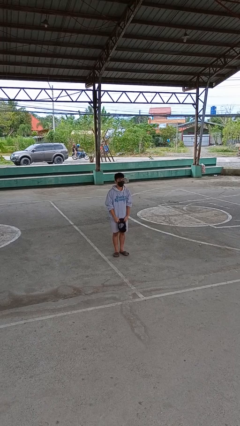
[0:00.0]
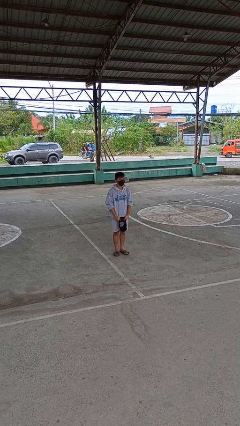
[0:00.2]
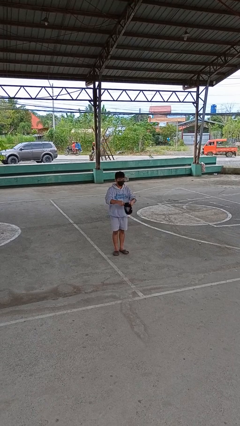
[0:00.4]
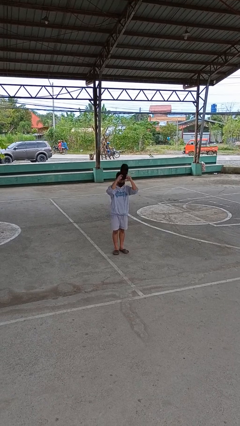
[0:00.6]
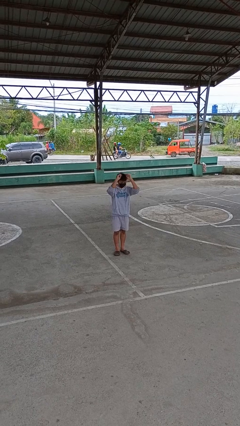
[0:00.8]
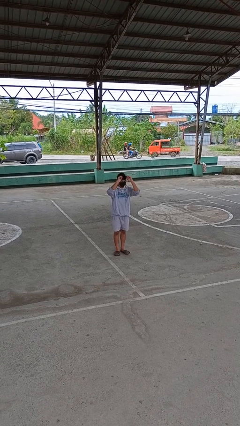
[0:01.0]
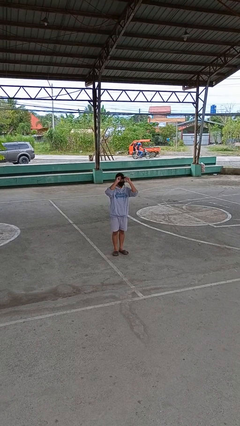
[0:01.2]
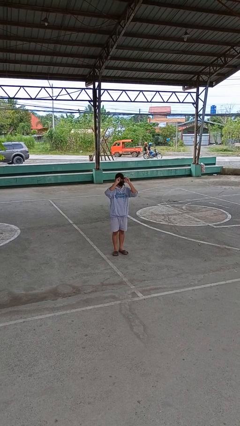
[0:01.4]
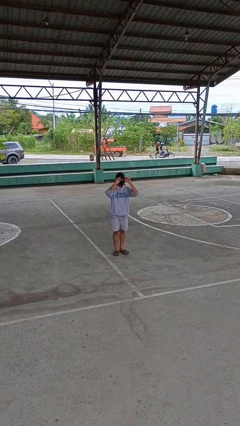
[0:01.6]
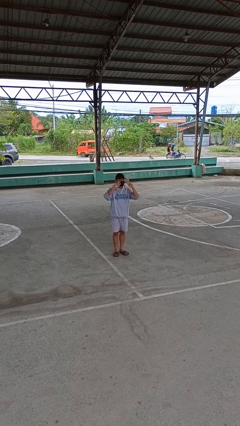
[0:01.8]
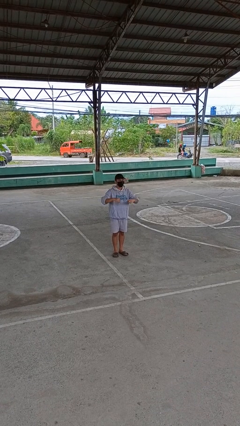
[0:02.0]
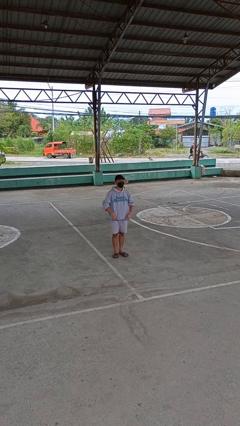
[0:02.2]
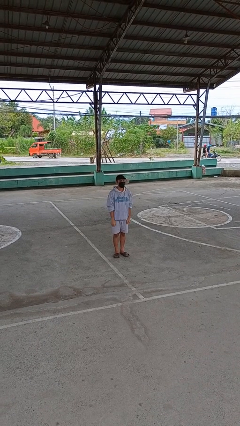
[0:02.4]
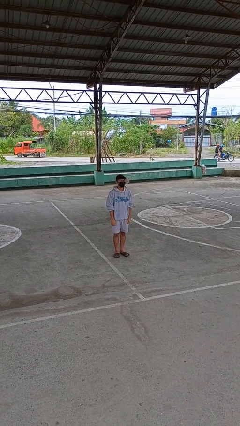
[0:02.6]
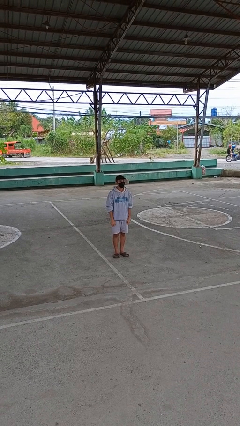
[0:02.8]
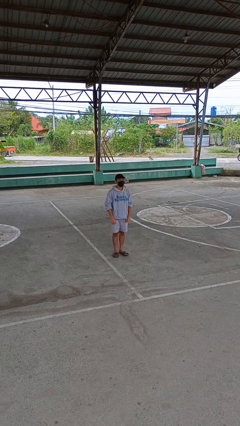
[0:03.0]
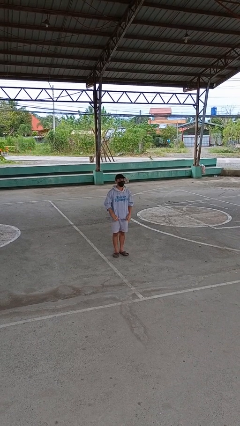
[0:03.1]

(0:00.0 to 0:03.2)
person puts on hat

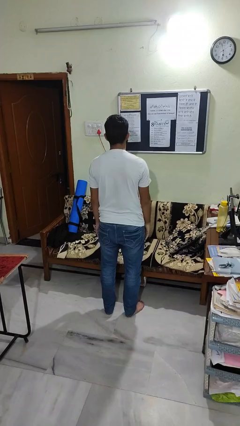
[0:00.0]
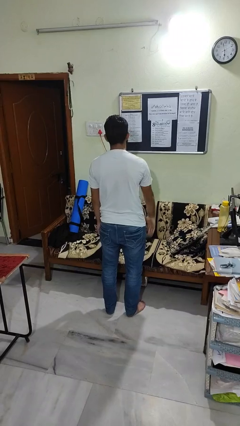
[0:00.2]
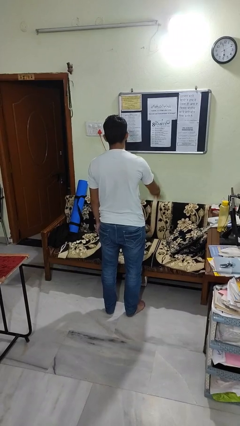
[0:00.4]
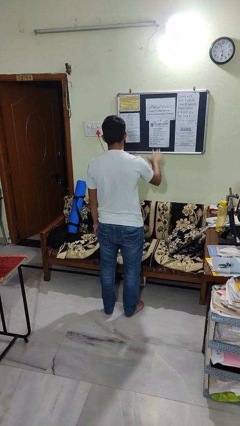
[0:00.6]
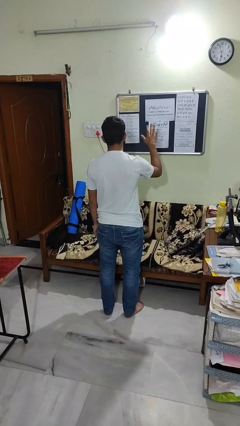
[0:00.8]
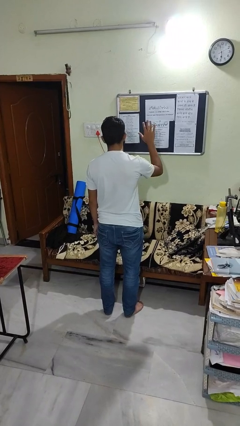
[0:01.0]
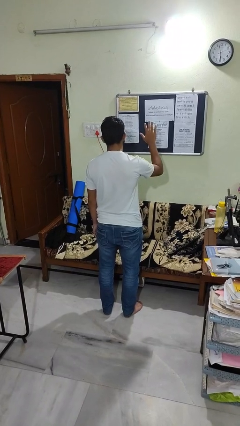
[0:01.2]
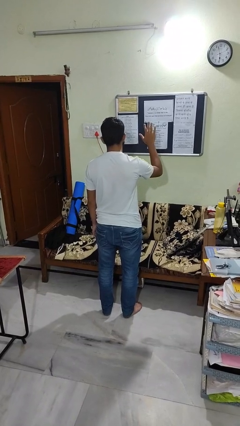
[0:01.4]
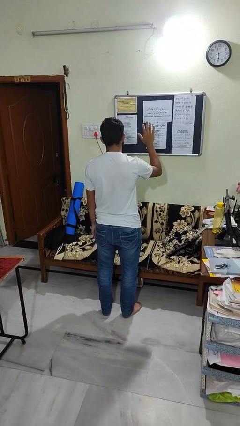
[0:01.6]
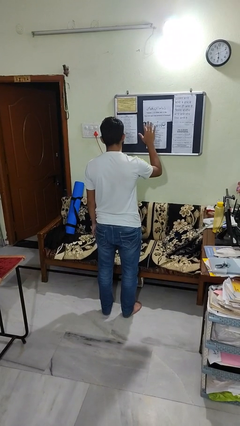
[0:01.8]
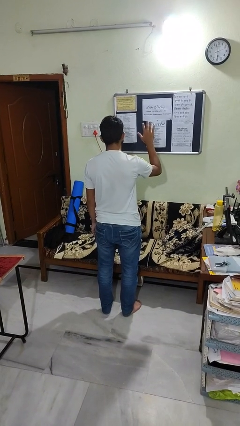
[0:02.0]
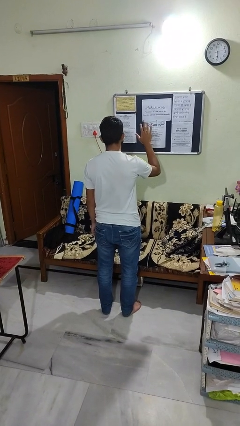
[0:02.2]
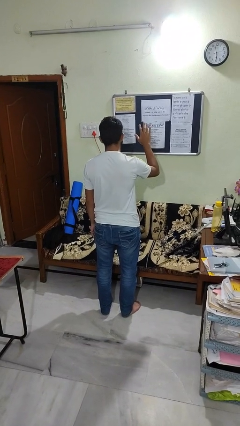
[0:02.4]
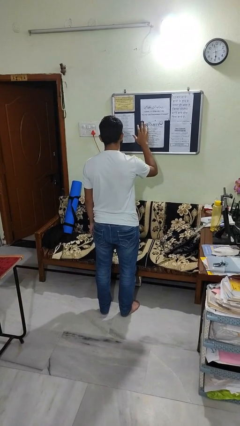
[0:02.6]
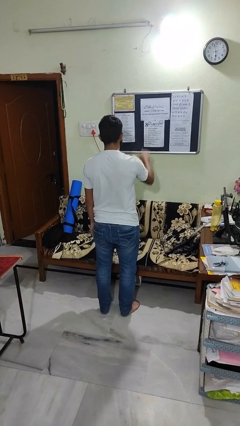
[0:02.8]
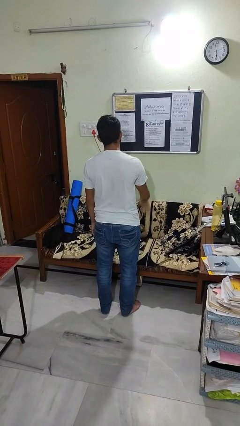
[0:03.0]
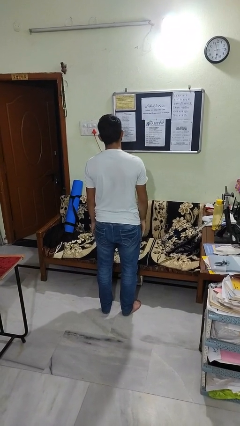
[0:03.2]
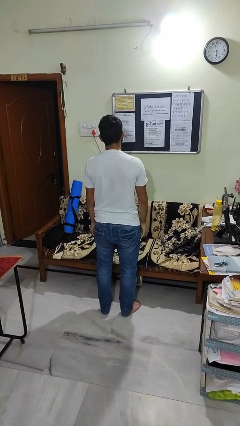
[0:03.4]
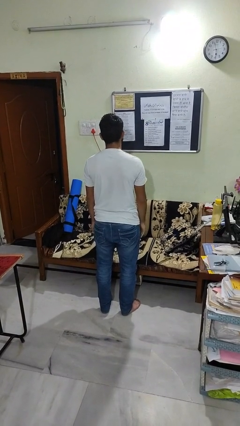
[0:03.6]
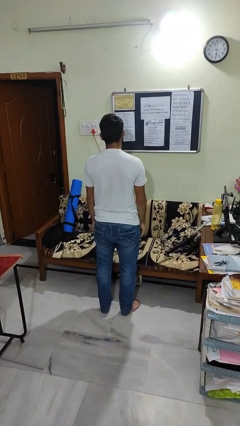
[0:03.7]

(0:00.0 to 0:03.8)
person gestures number five

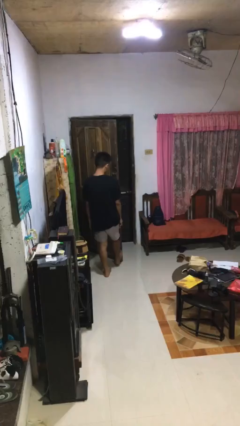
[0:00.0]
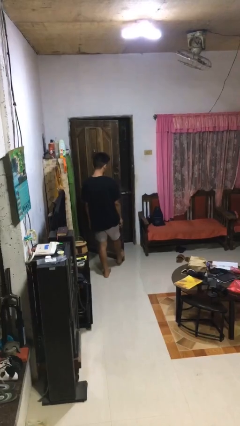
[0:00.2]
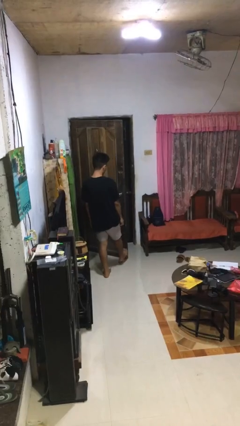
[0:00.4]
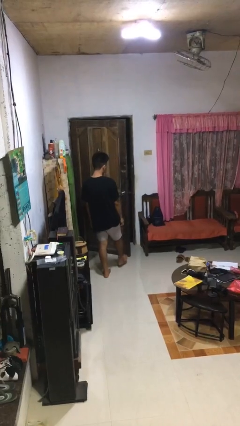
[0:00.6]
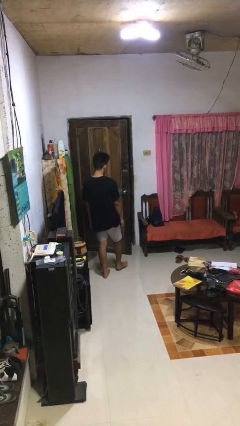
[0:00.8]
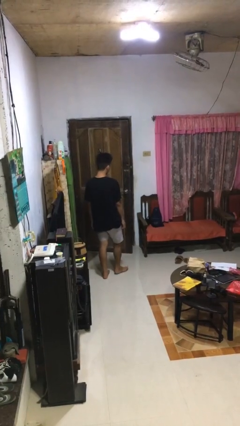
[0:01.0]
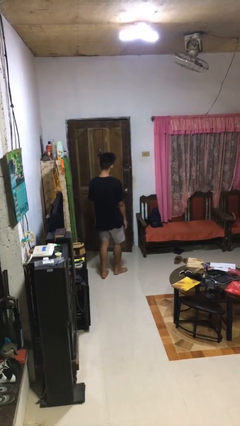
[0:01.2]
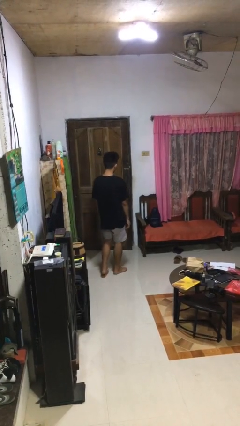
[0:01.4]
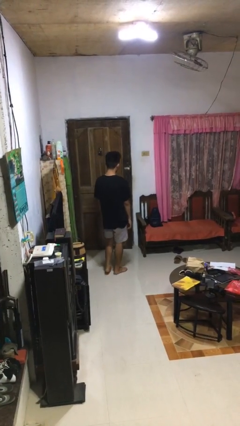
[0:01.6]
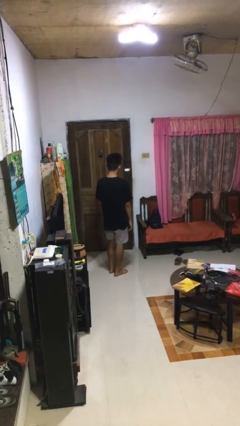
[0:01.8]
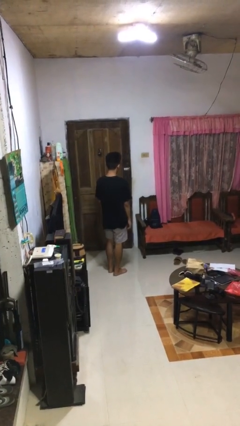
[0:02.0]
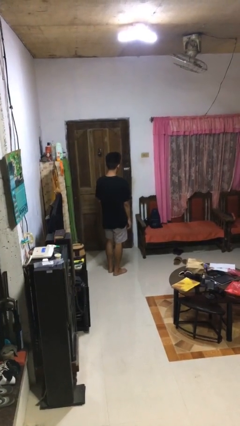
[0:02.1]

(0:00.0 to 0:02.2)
person closes door with foot

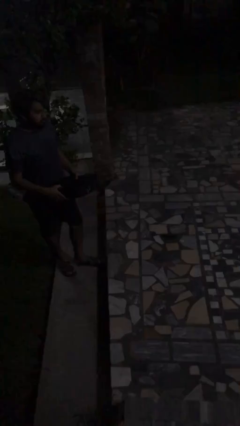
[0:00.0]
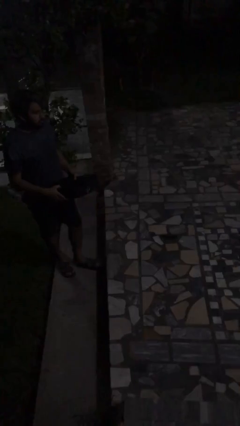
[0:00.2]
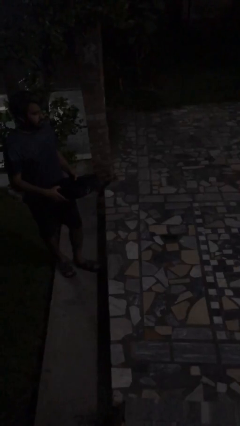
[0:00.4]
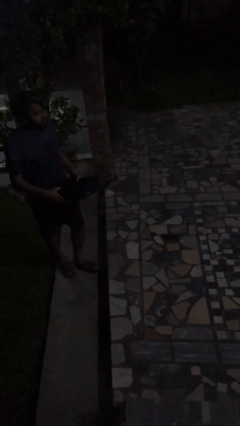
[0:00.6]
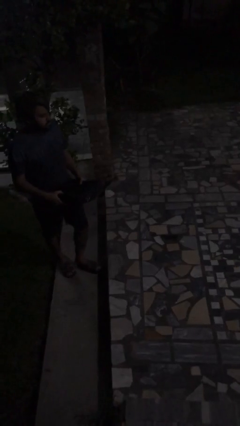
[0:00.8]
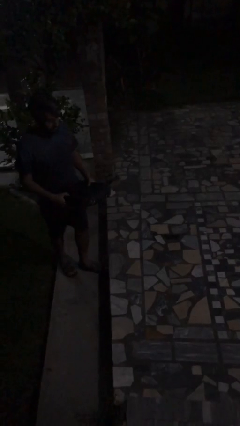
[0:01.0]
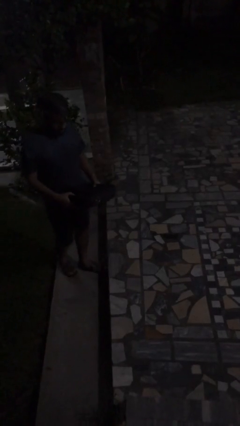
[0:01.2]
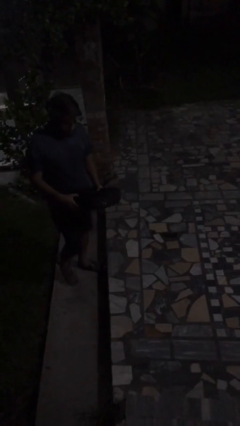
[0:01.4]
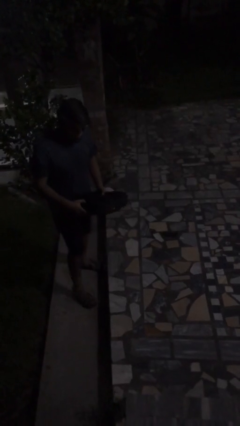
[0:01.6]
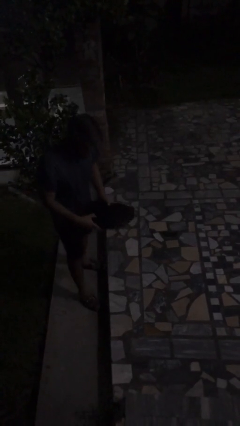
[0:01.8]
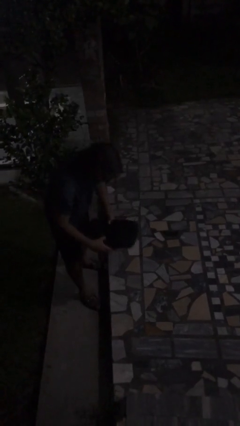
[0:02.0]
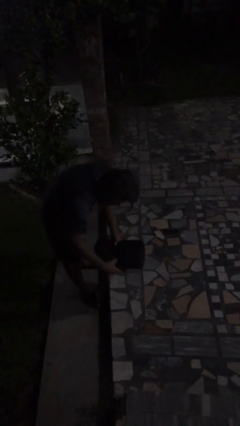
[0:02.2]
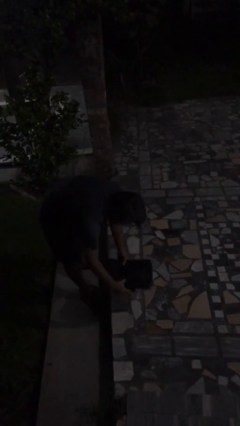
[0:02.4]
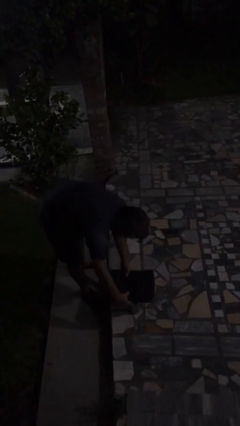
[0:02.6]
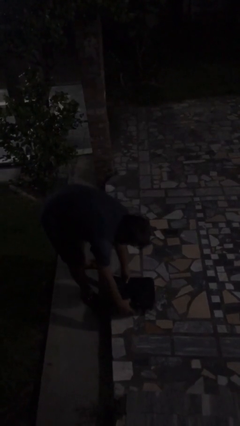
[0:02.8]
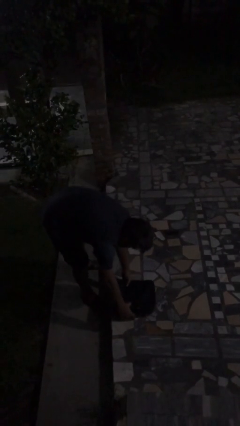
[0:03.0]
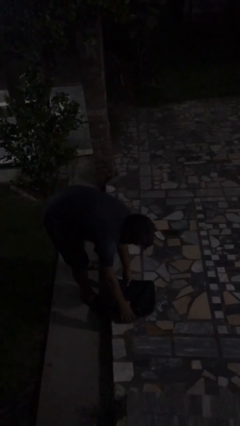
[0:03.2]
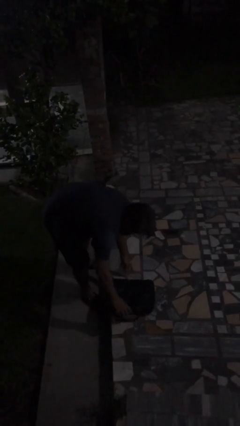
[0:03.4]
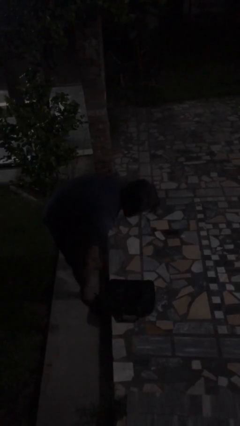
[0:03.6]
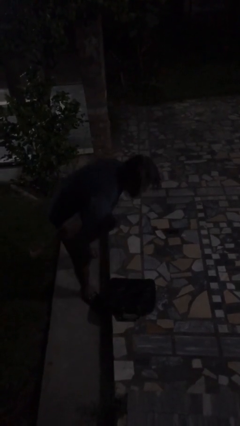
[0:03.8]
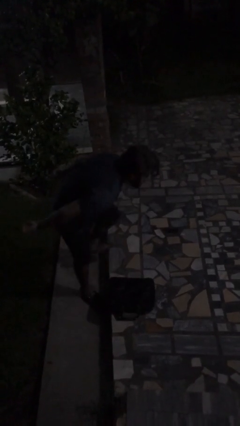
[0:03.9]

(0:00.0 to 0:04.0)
person puts down object on floor

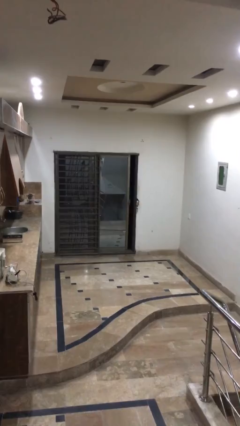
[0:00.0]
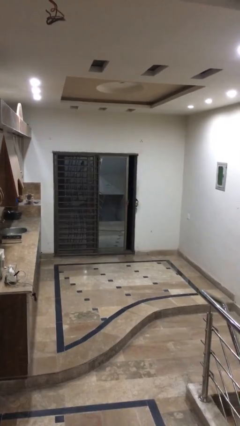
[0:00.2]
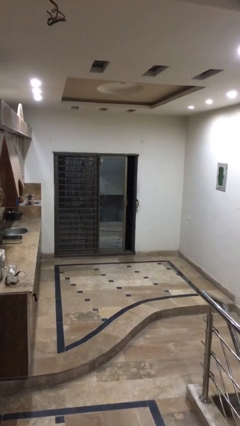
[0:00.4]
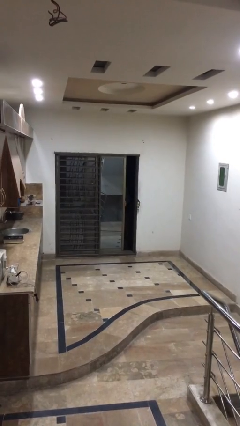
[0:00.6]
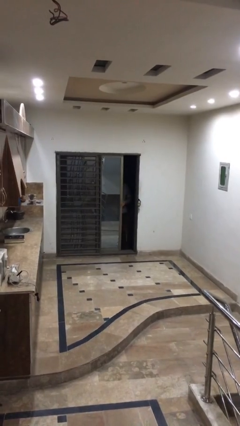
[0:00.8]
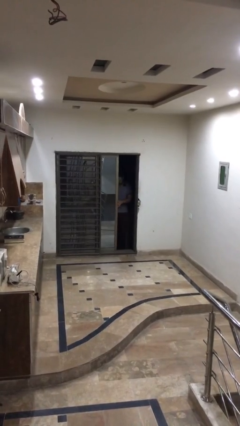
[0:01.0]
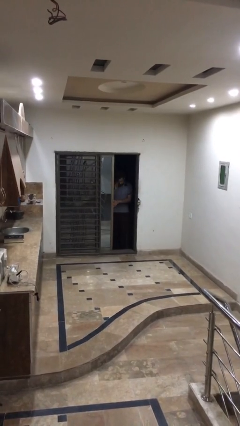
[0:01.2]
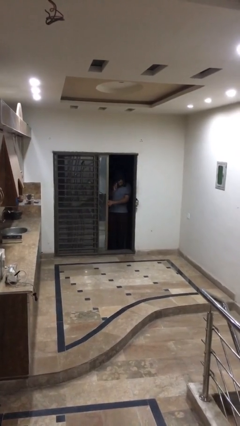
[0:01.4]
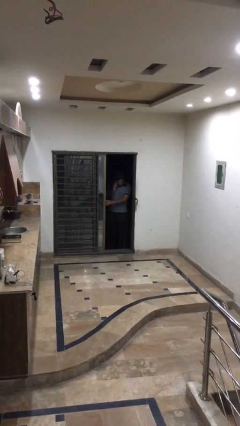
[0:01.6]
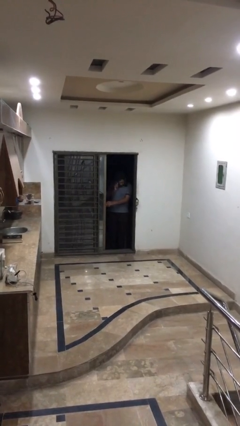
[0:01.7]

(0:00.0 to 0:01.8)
person opens facility door

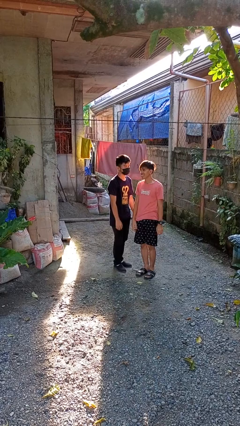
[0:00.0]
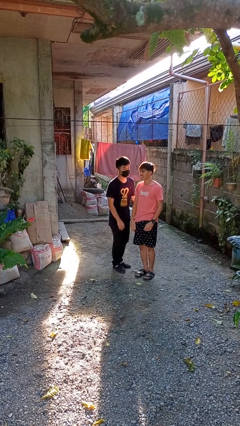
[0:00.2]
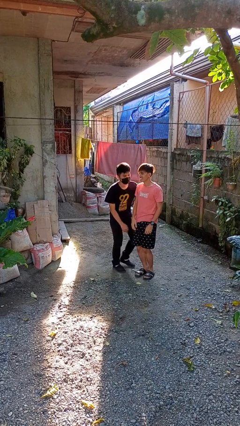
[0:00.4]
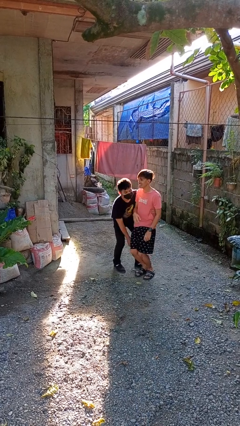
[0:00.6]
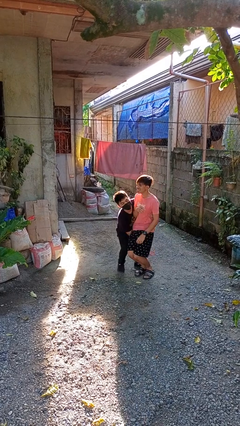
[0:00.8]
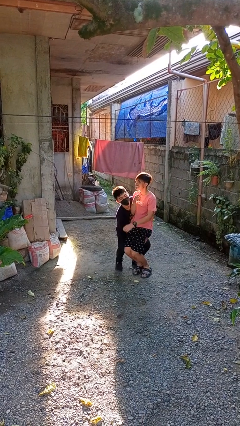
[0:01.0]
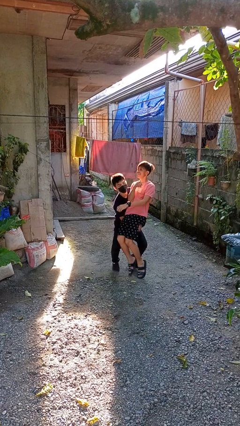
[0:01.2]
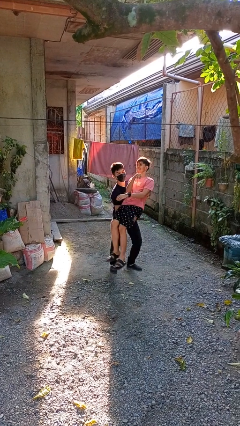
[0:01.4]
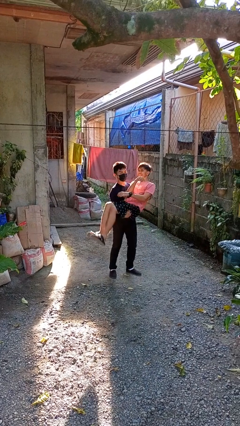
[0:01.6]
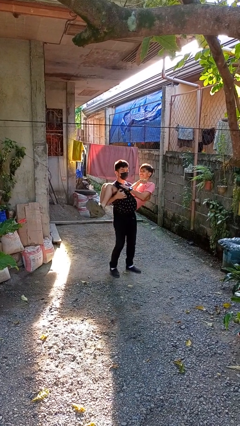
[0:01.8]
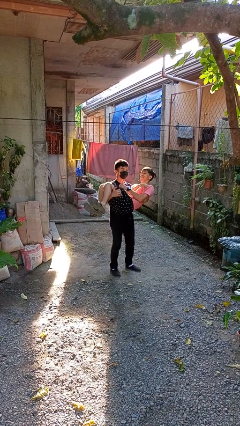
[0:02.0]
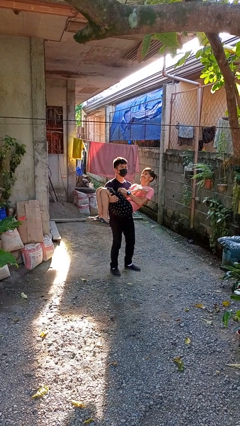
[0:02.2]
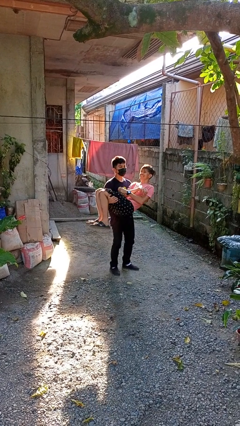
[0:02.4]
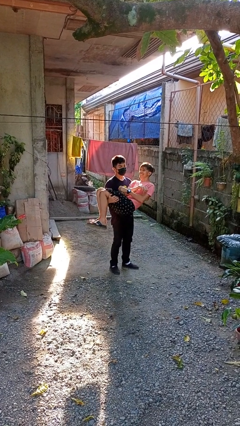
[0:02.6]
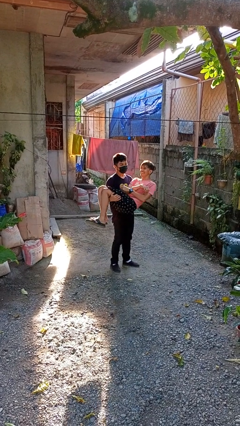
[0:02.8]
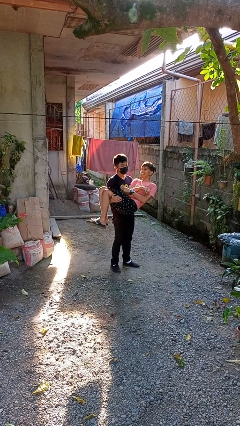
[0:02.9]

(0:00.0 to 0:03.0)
person picks up person
